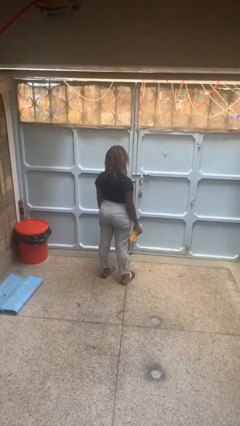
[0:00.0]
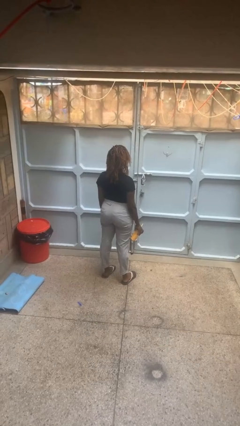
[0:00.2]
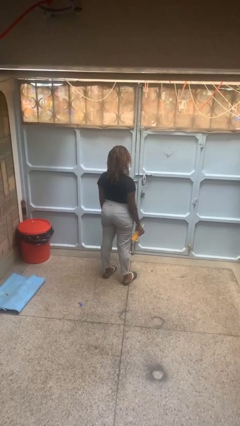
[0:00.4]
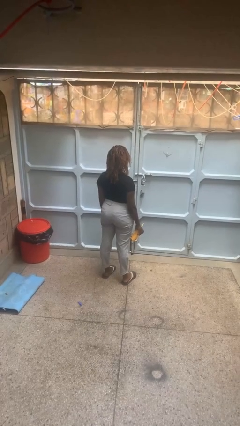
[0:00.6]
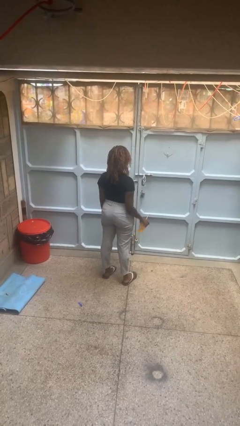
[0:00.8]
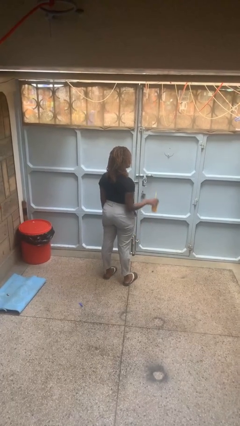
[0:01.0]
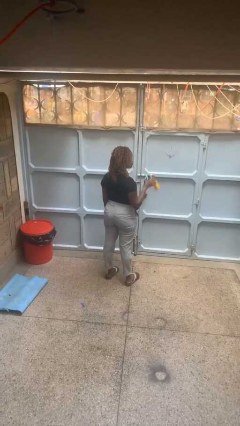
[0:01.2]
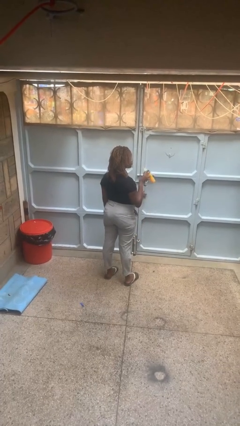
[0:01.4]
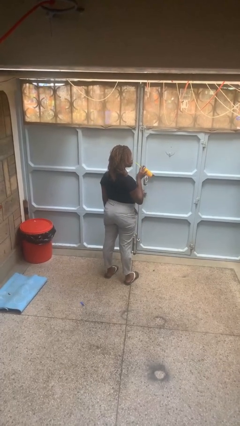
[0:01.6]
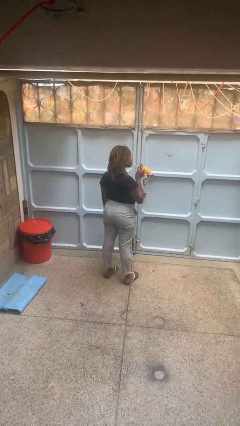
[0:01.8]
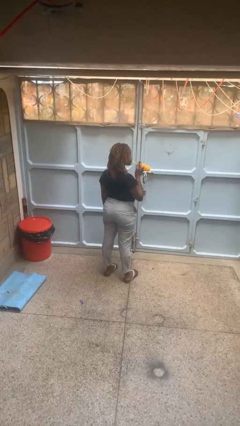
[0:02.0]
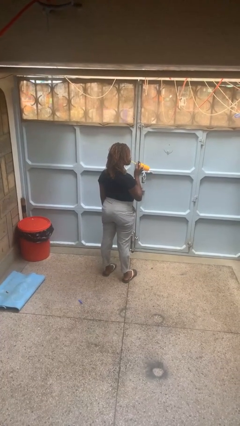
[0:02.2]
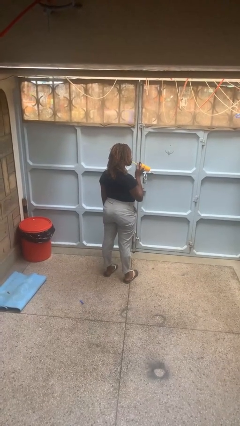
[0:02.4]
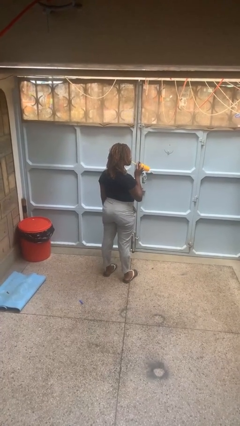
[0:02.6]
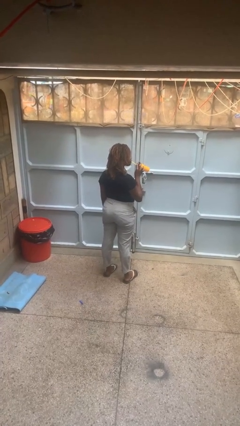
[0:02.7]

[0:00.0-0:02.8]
person drinks from straw

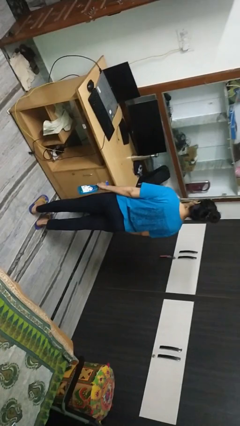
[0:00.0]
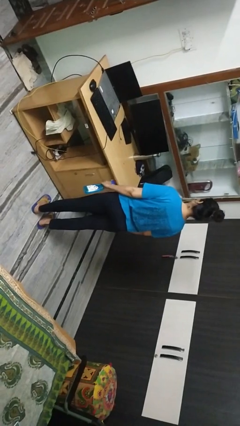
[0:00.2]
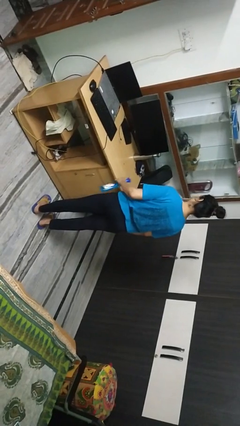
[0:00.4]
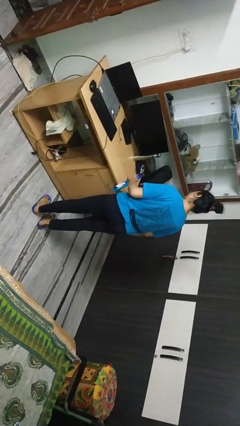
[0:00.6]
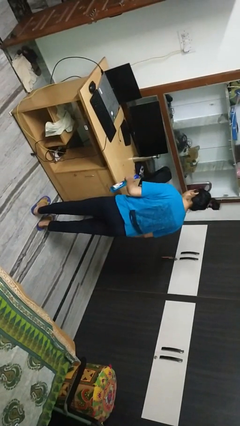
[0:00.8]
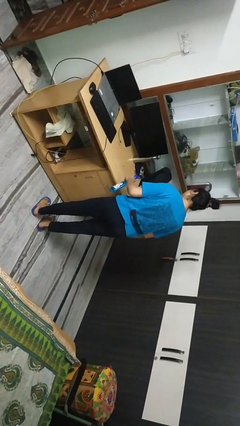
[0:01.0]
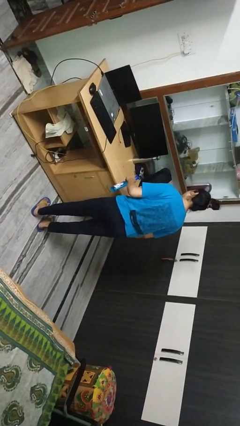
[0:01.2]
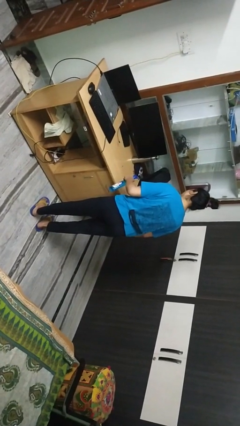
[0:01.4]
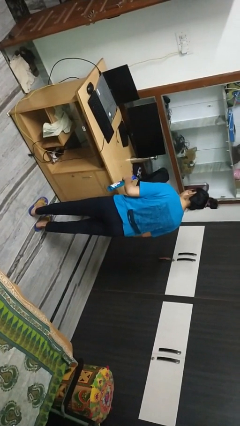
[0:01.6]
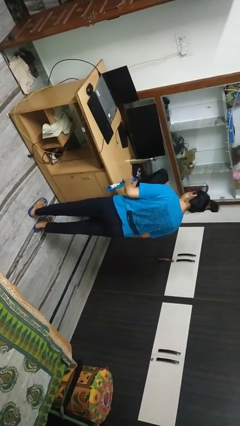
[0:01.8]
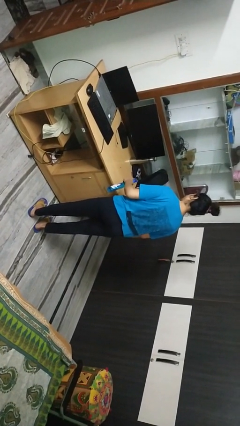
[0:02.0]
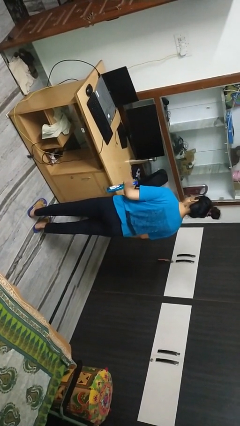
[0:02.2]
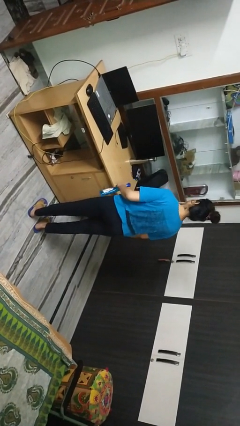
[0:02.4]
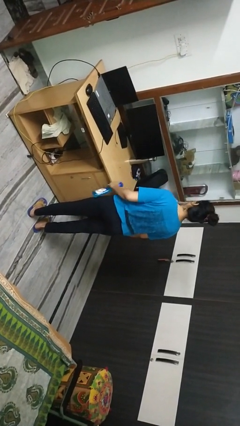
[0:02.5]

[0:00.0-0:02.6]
person sprays from bottle

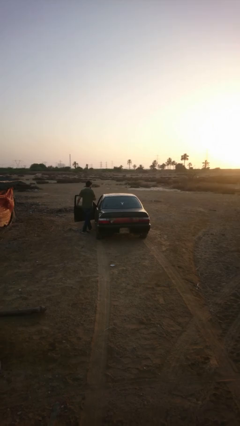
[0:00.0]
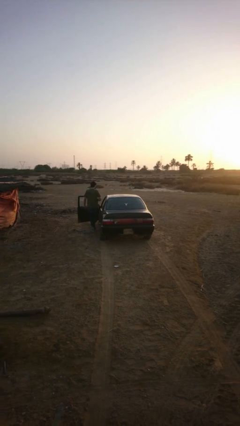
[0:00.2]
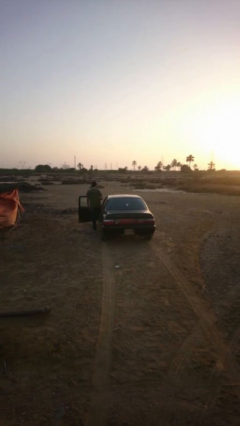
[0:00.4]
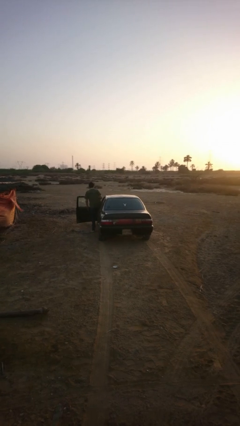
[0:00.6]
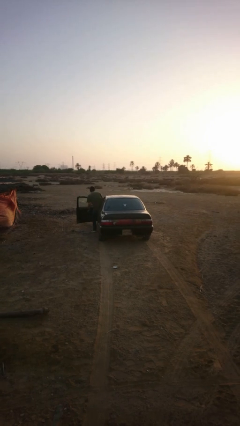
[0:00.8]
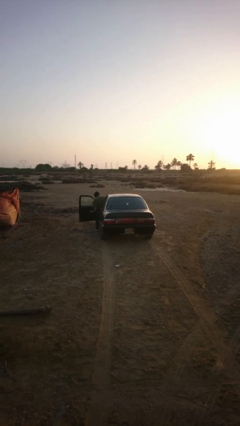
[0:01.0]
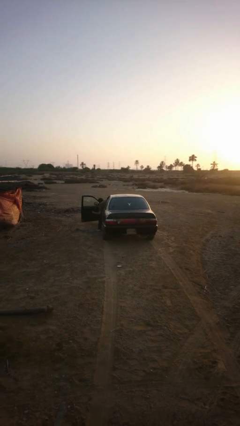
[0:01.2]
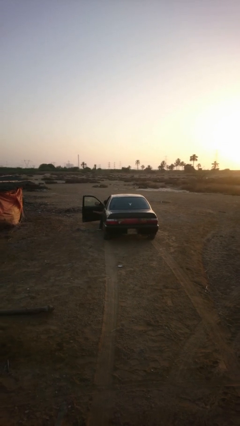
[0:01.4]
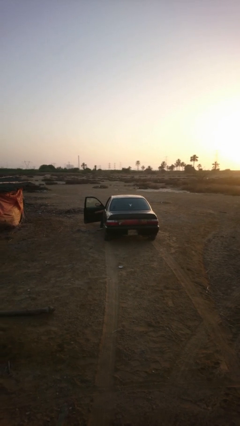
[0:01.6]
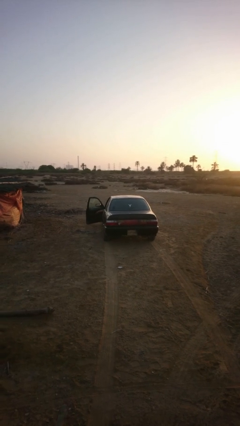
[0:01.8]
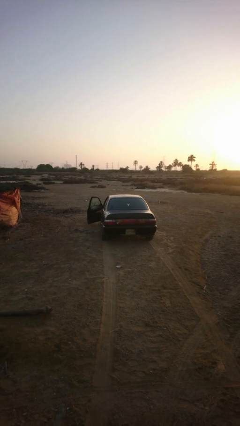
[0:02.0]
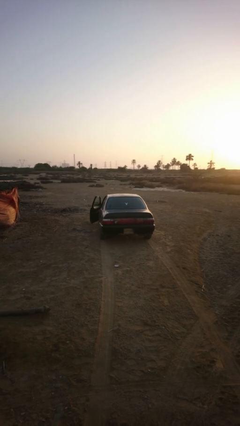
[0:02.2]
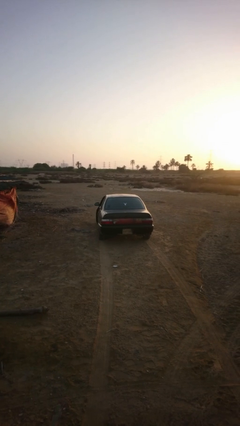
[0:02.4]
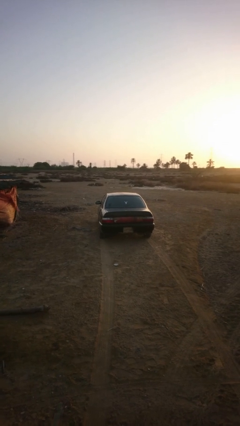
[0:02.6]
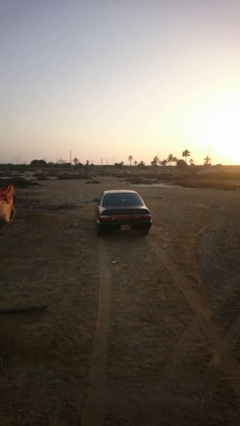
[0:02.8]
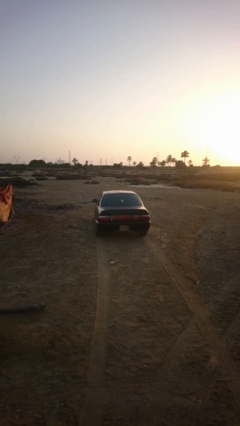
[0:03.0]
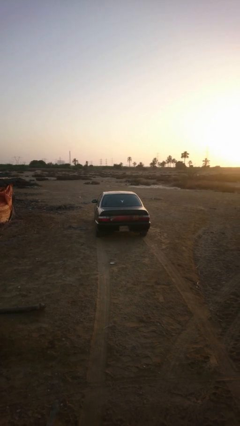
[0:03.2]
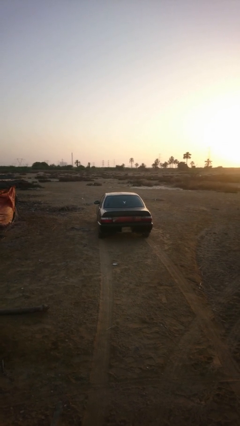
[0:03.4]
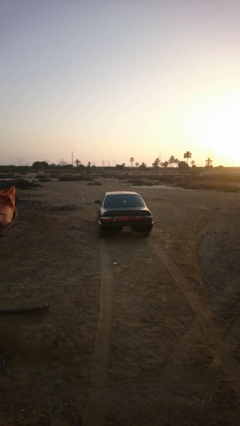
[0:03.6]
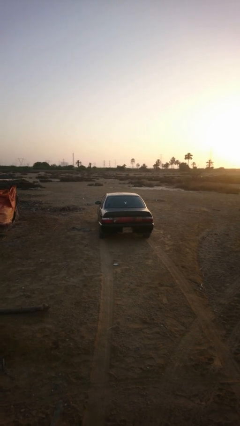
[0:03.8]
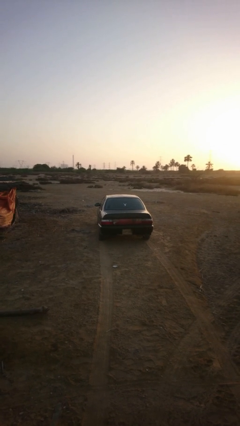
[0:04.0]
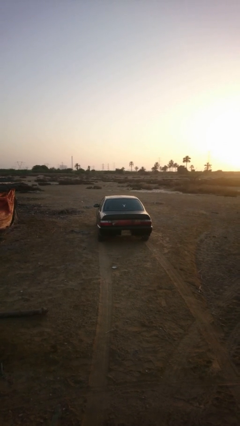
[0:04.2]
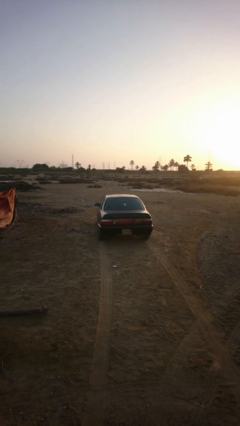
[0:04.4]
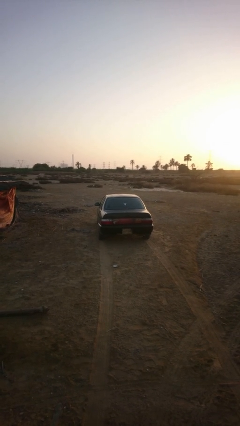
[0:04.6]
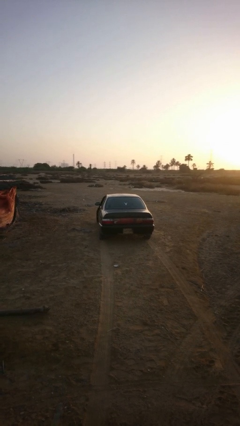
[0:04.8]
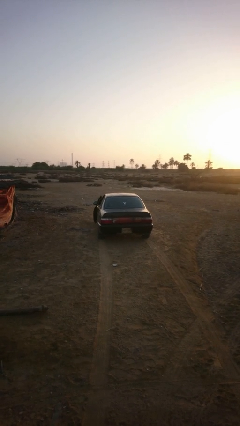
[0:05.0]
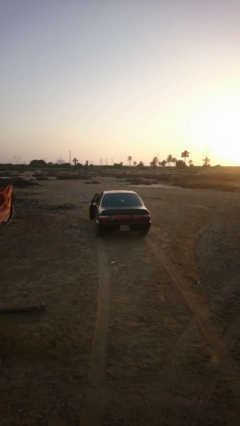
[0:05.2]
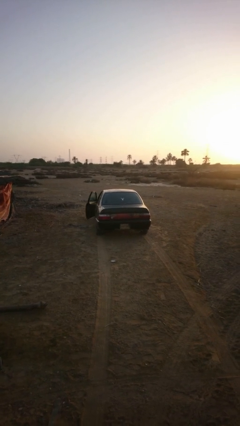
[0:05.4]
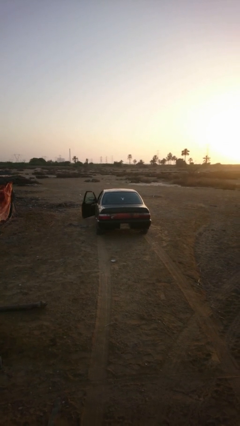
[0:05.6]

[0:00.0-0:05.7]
car picks up person

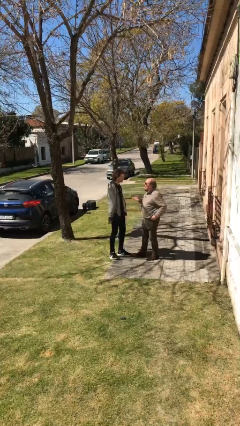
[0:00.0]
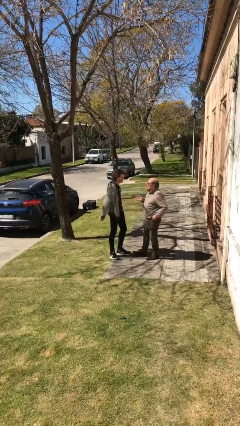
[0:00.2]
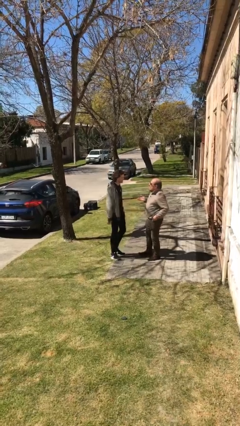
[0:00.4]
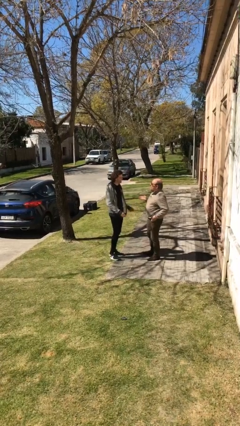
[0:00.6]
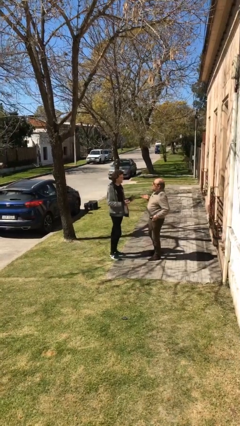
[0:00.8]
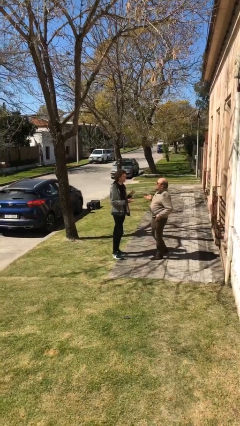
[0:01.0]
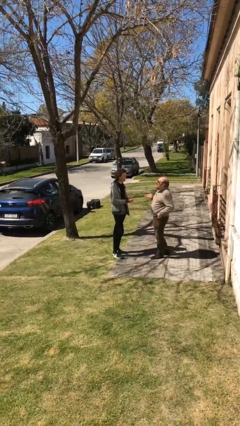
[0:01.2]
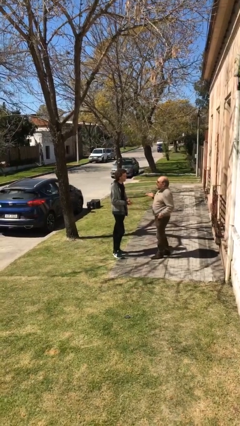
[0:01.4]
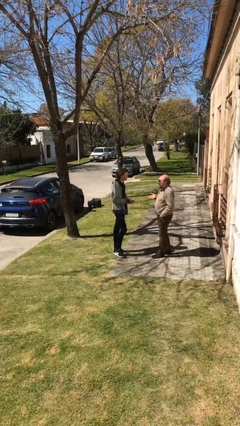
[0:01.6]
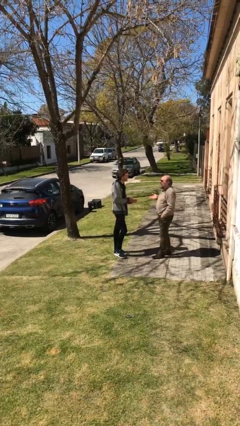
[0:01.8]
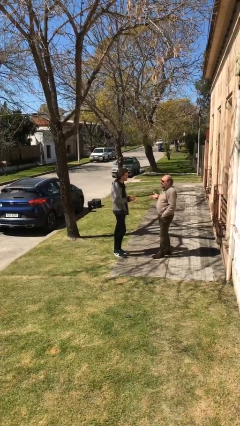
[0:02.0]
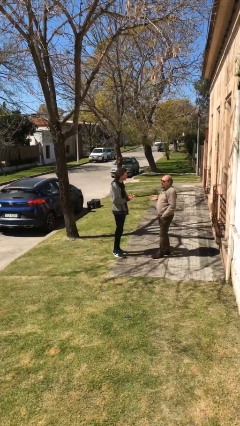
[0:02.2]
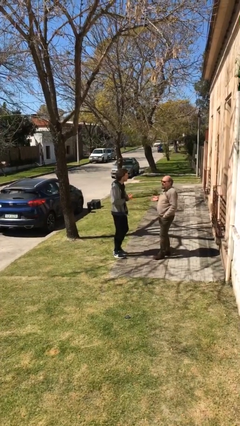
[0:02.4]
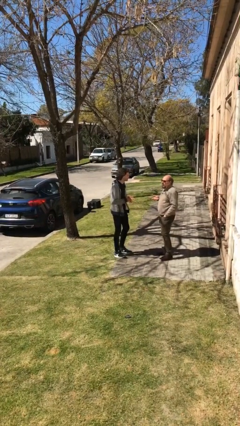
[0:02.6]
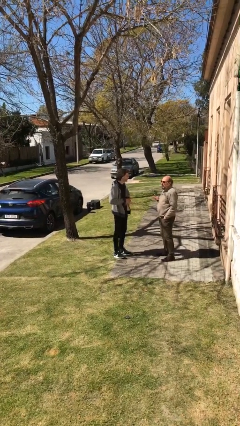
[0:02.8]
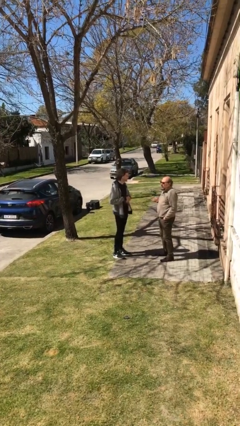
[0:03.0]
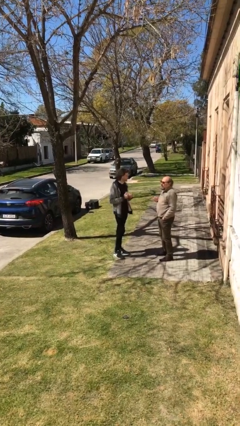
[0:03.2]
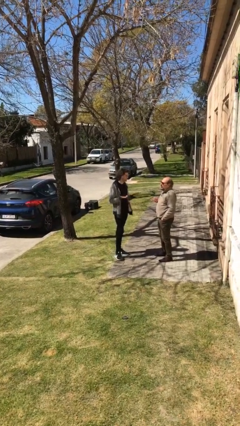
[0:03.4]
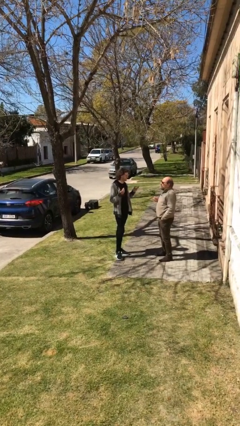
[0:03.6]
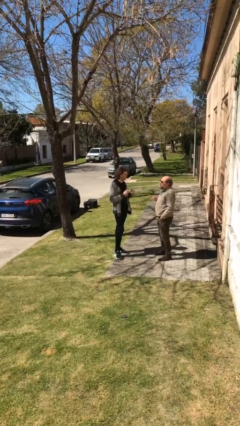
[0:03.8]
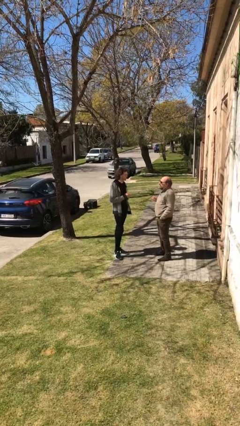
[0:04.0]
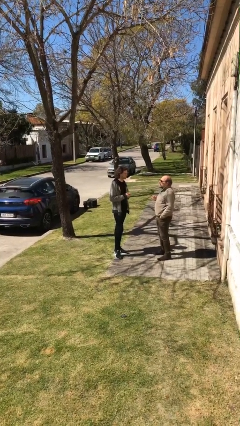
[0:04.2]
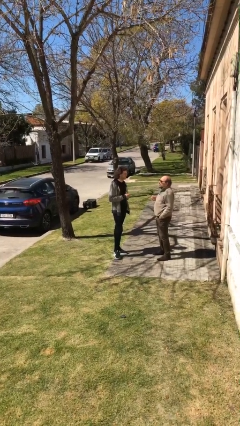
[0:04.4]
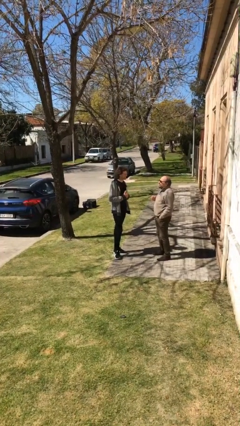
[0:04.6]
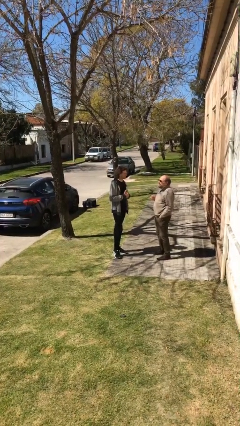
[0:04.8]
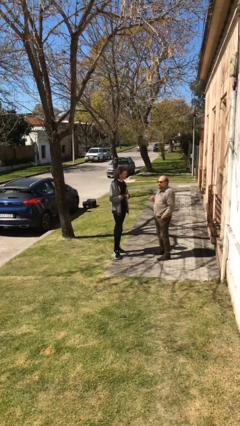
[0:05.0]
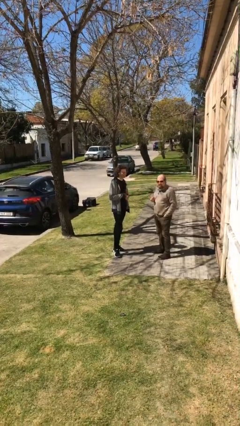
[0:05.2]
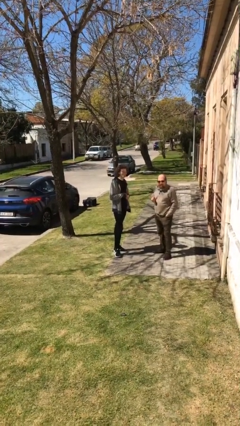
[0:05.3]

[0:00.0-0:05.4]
person talks to person

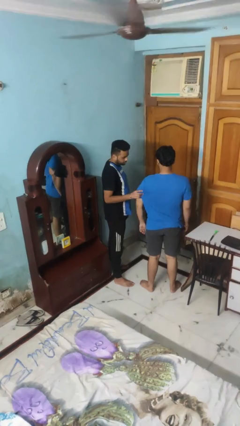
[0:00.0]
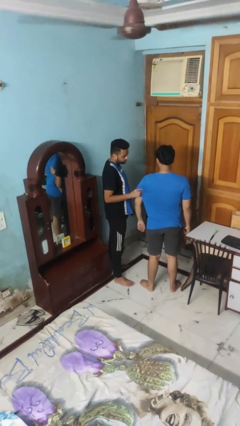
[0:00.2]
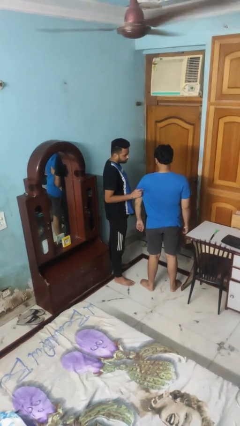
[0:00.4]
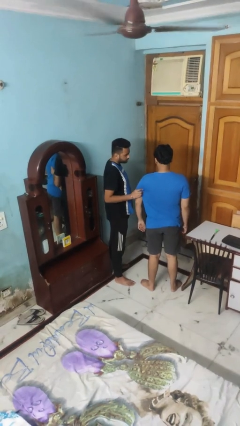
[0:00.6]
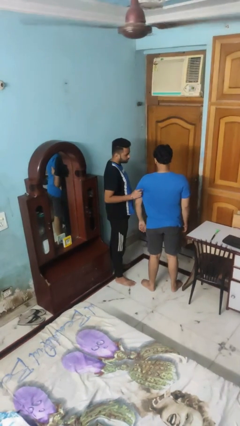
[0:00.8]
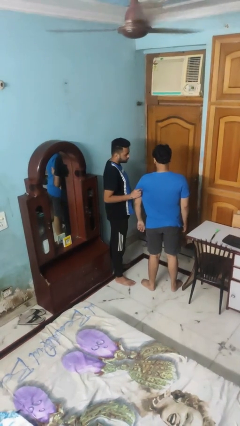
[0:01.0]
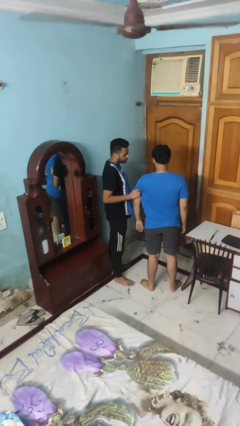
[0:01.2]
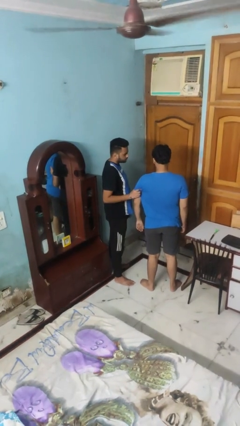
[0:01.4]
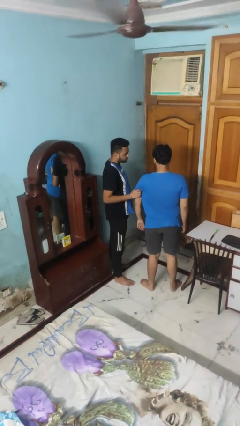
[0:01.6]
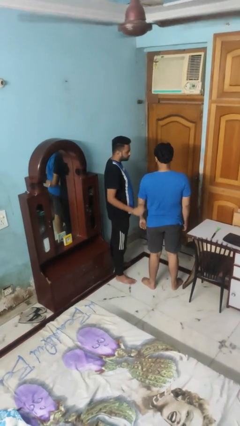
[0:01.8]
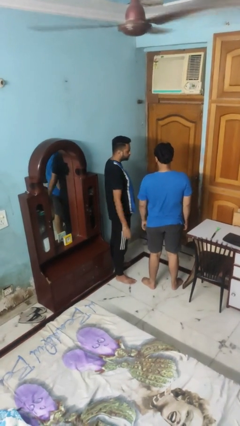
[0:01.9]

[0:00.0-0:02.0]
person grabs person by bicep
